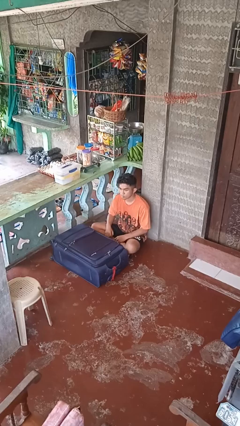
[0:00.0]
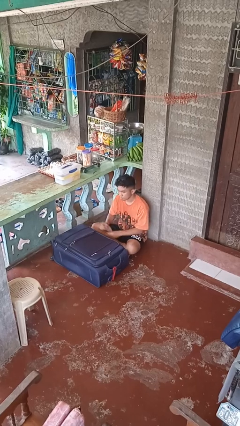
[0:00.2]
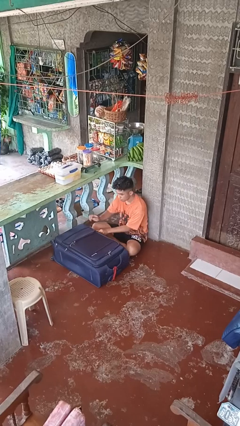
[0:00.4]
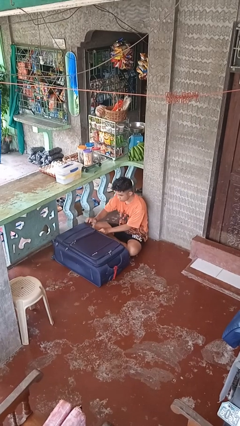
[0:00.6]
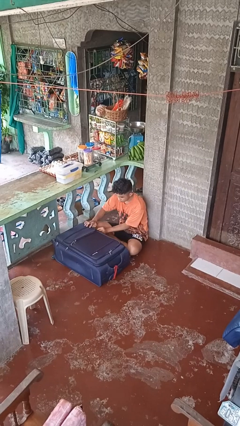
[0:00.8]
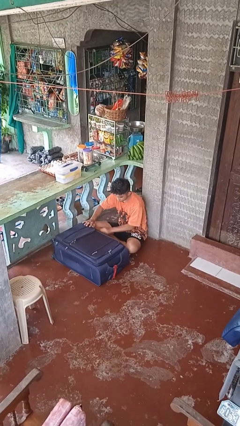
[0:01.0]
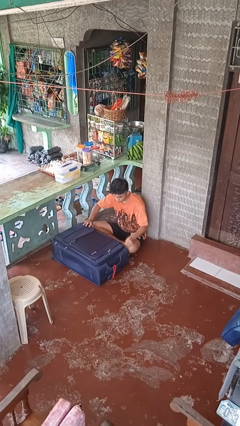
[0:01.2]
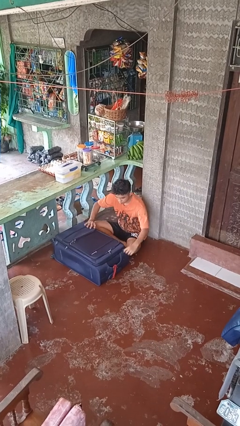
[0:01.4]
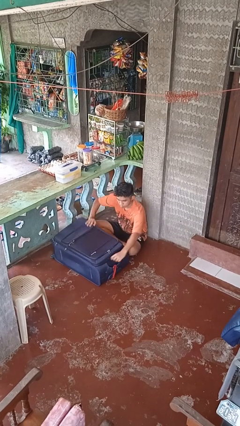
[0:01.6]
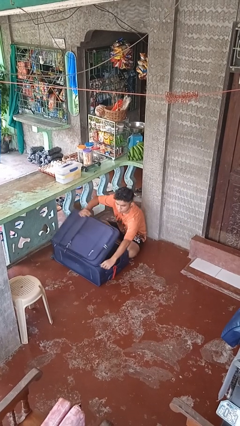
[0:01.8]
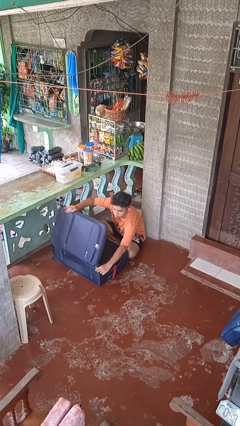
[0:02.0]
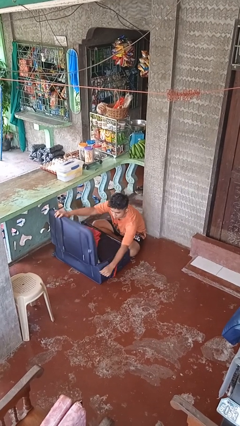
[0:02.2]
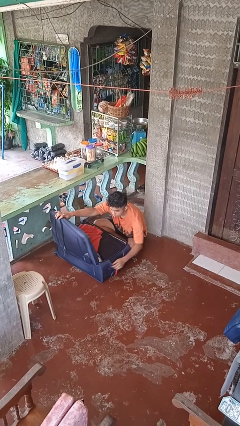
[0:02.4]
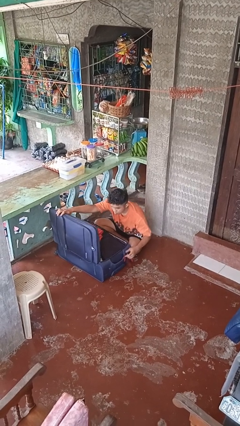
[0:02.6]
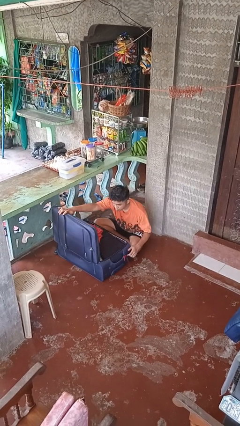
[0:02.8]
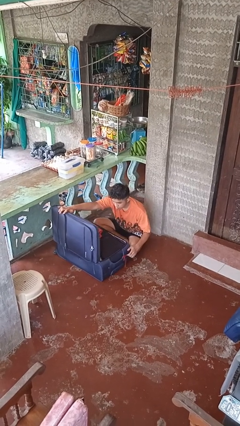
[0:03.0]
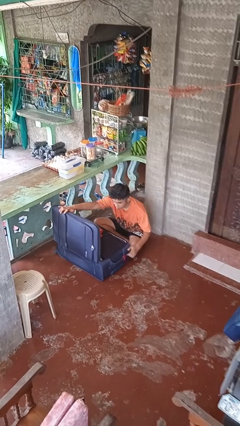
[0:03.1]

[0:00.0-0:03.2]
person opens suitcase

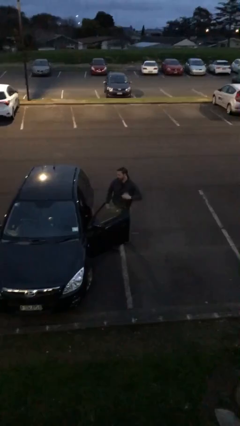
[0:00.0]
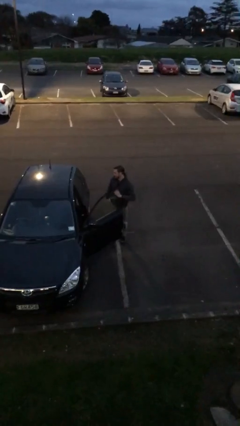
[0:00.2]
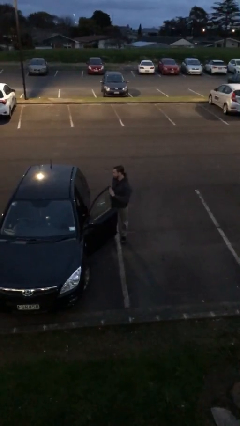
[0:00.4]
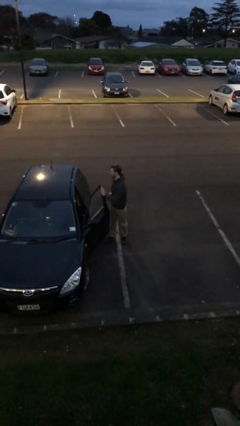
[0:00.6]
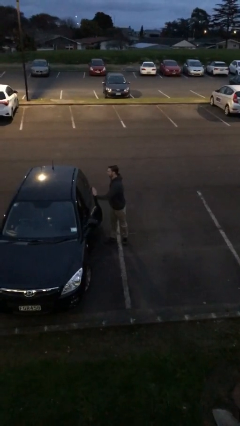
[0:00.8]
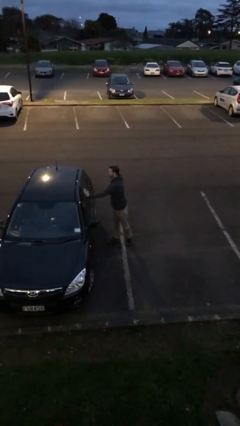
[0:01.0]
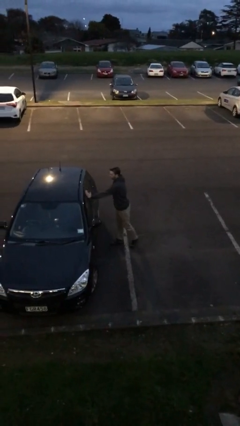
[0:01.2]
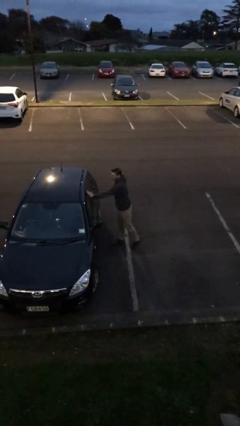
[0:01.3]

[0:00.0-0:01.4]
person closes car door

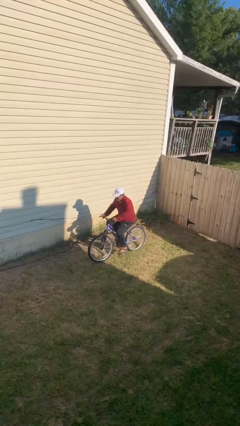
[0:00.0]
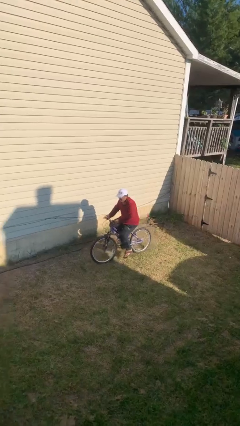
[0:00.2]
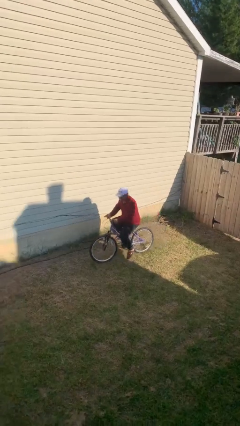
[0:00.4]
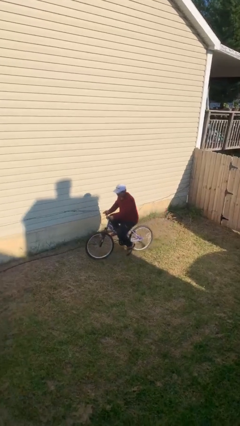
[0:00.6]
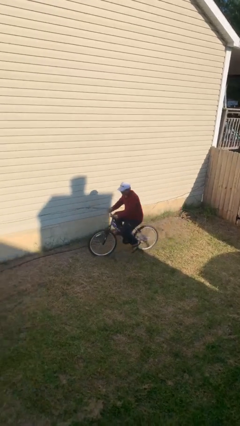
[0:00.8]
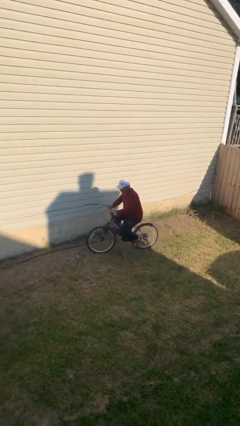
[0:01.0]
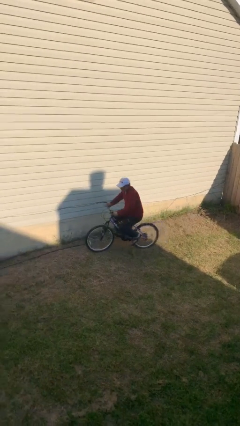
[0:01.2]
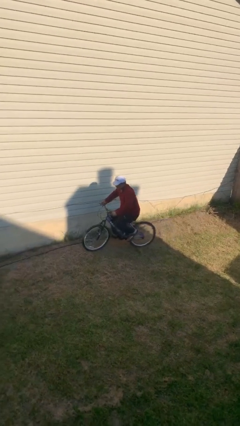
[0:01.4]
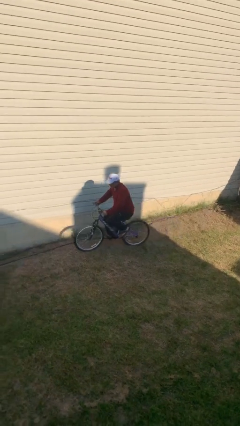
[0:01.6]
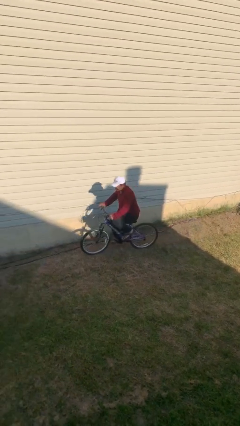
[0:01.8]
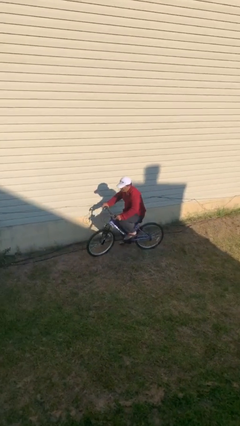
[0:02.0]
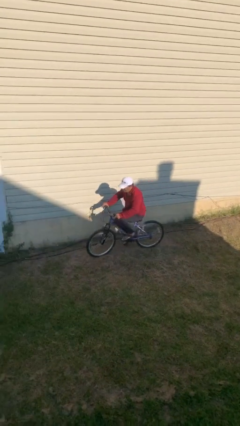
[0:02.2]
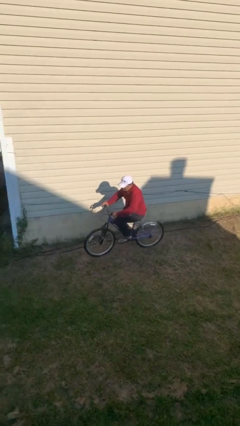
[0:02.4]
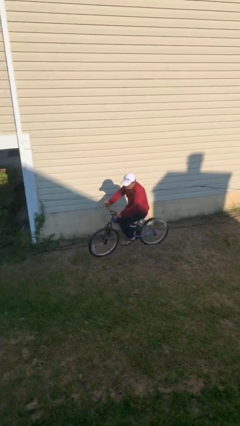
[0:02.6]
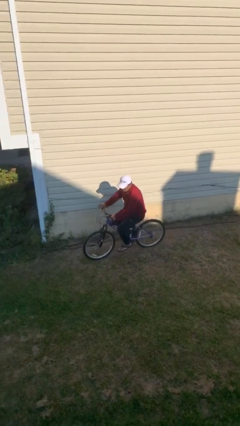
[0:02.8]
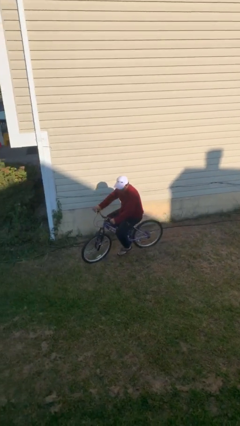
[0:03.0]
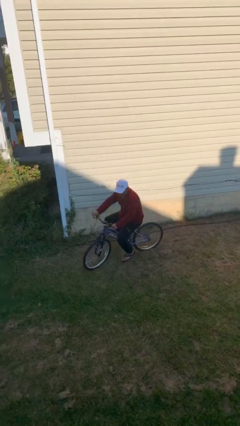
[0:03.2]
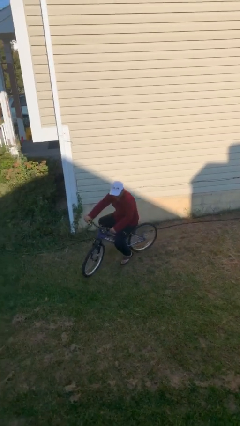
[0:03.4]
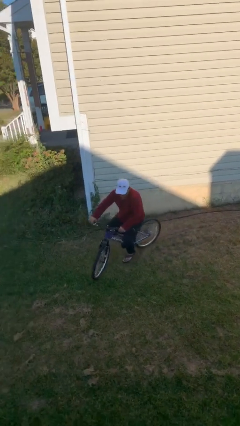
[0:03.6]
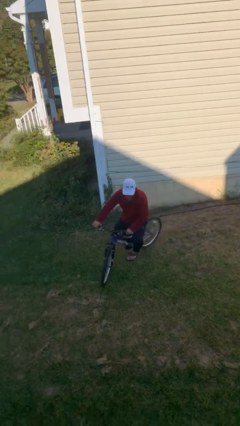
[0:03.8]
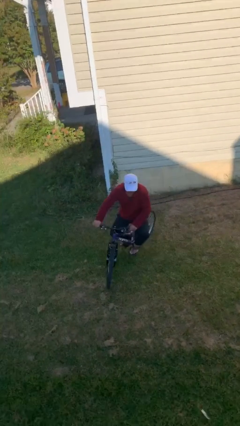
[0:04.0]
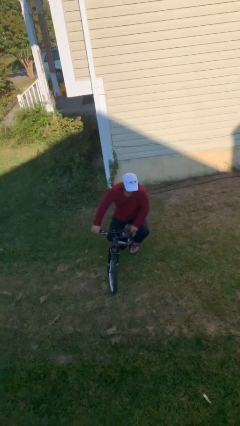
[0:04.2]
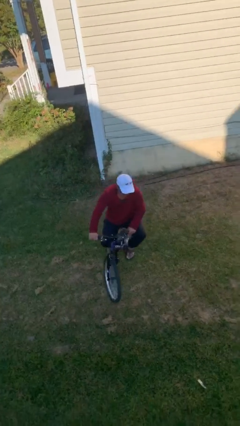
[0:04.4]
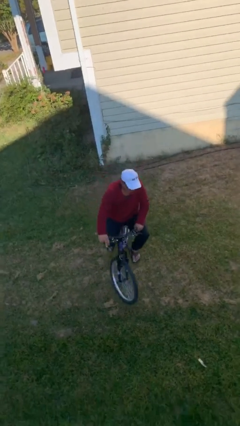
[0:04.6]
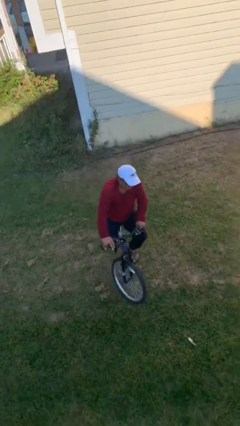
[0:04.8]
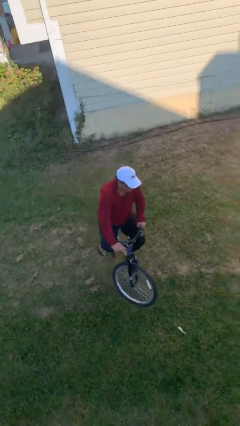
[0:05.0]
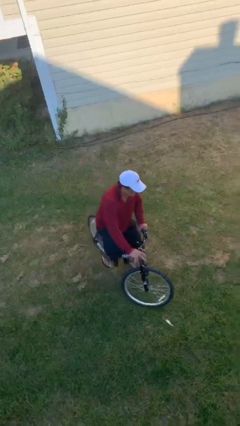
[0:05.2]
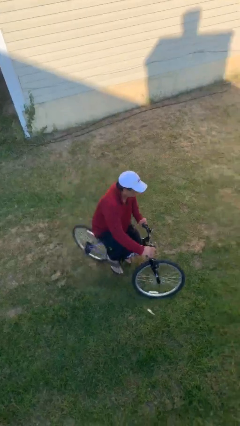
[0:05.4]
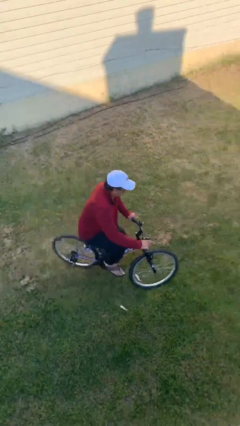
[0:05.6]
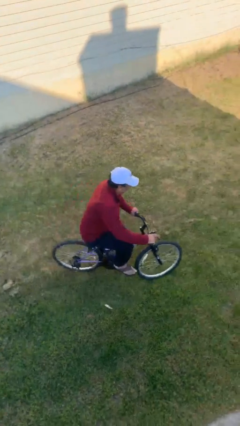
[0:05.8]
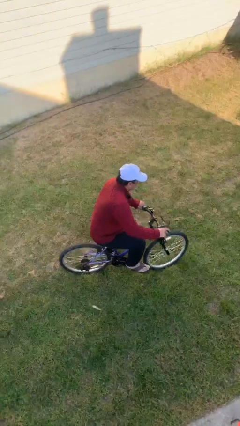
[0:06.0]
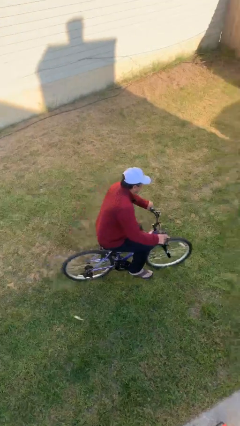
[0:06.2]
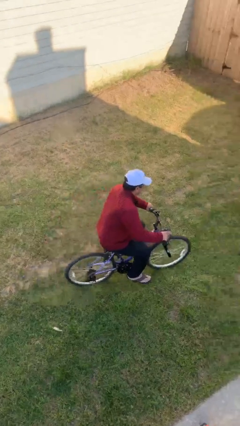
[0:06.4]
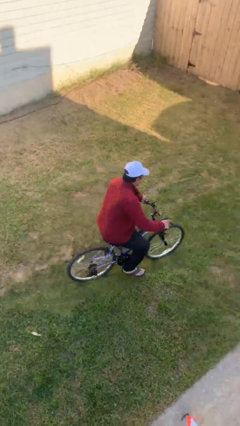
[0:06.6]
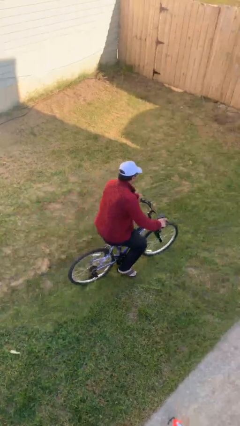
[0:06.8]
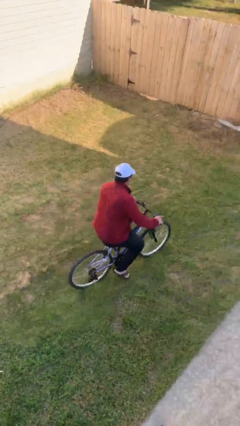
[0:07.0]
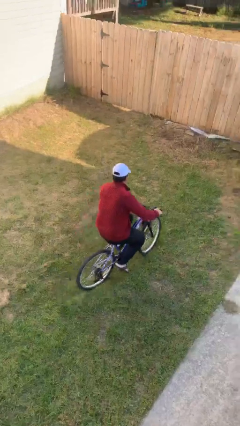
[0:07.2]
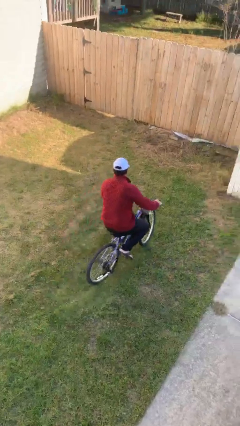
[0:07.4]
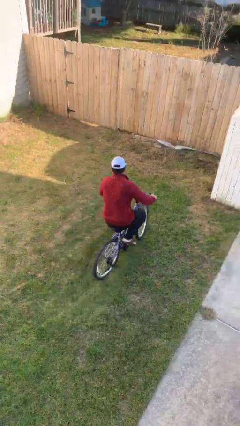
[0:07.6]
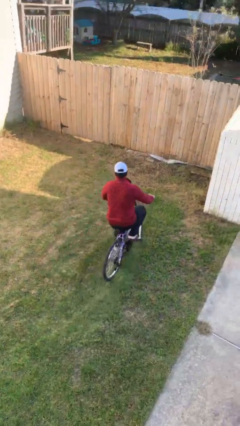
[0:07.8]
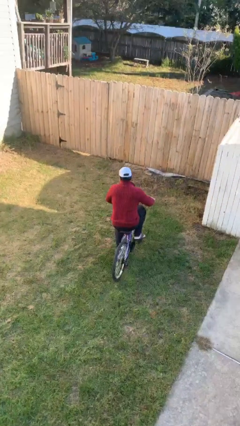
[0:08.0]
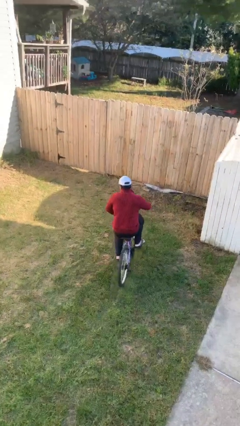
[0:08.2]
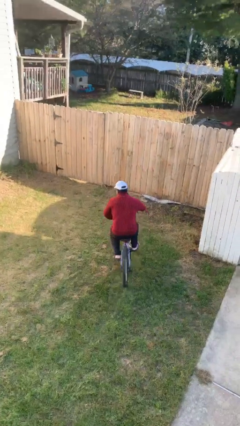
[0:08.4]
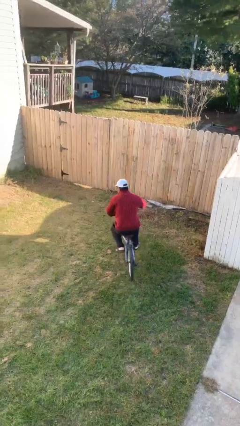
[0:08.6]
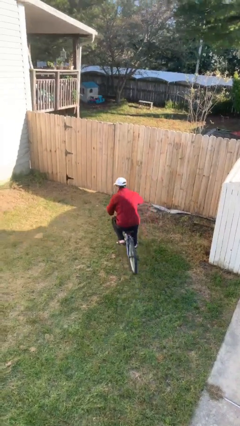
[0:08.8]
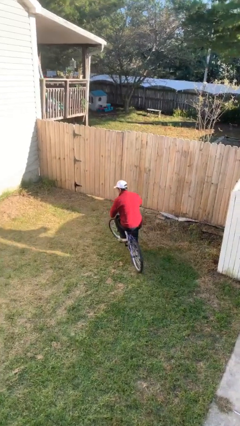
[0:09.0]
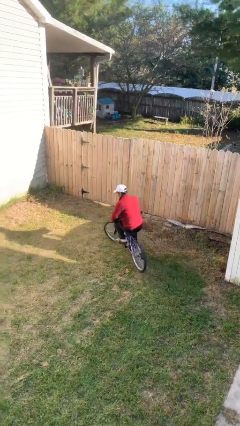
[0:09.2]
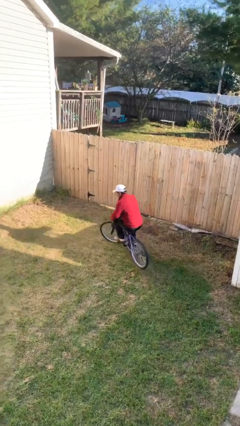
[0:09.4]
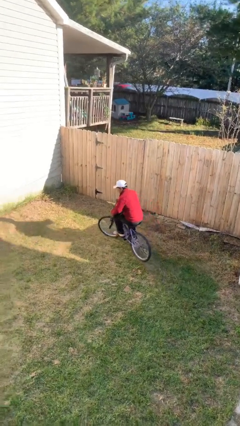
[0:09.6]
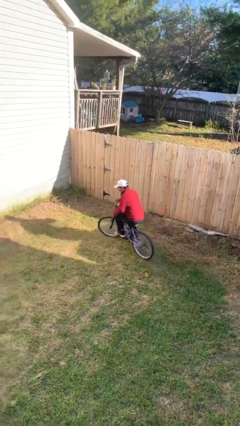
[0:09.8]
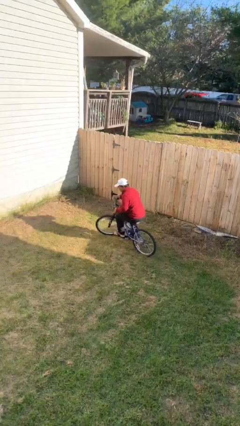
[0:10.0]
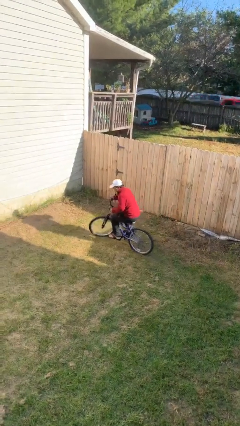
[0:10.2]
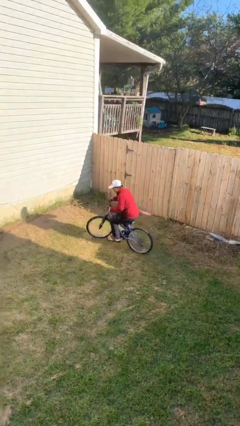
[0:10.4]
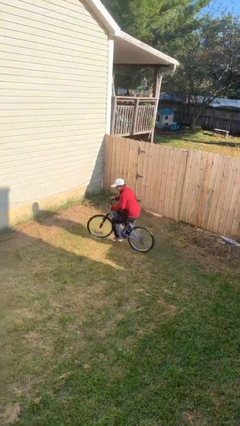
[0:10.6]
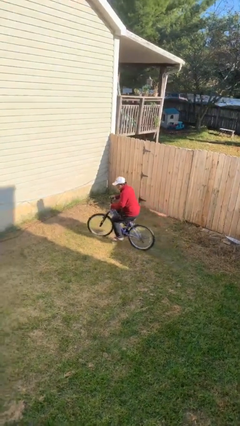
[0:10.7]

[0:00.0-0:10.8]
person rides bicycle

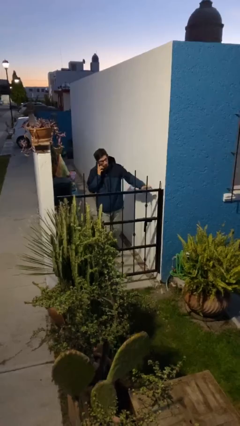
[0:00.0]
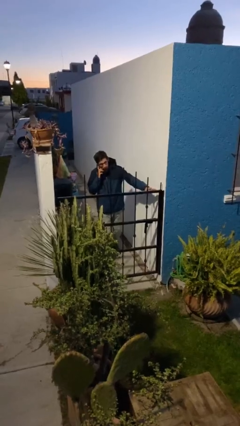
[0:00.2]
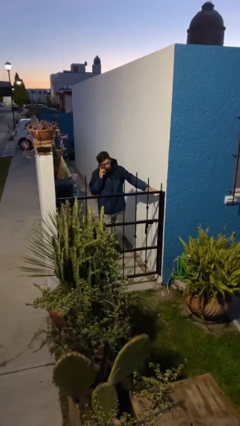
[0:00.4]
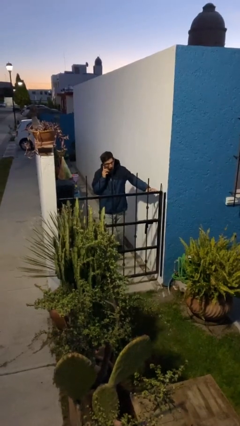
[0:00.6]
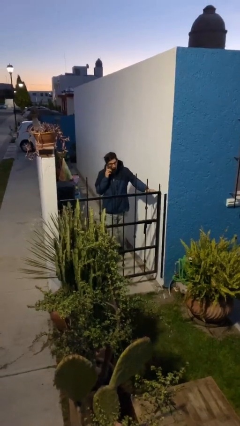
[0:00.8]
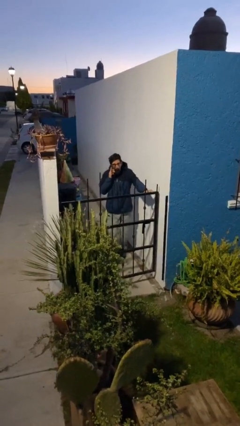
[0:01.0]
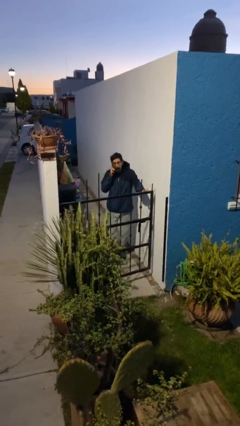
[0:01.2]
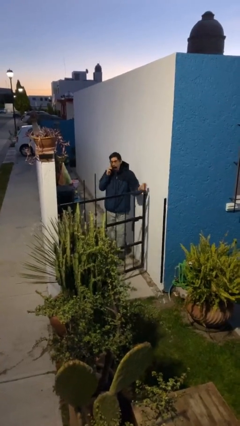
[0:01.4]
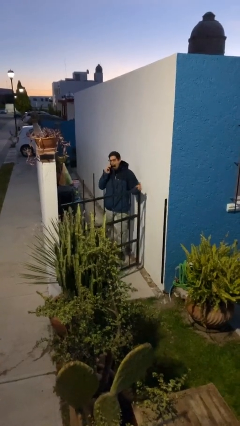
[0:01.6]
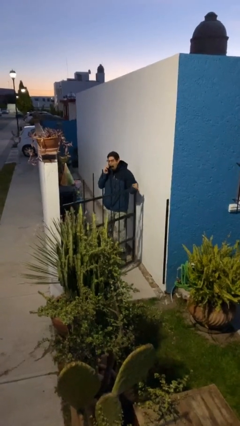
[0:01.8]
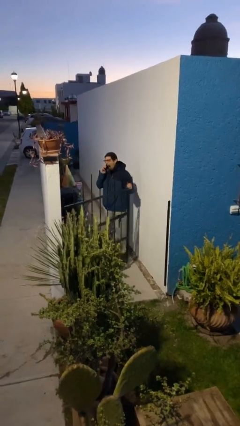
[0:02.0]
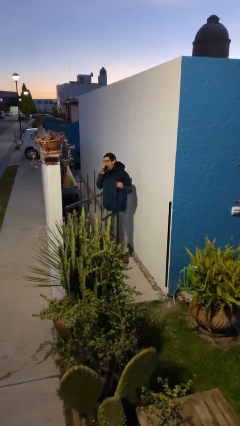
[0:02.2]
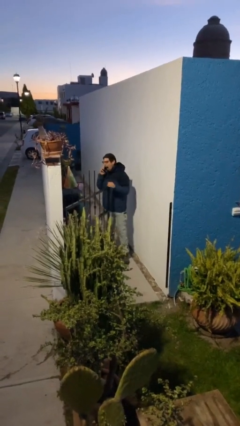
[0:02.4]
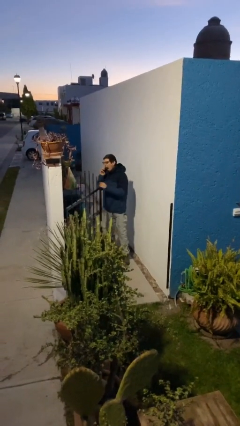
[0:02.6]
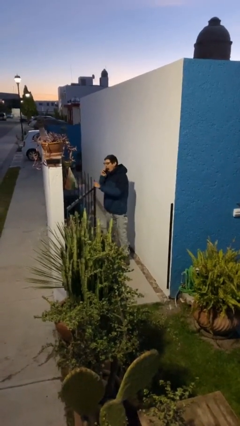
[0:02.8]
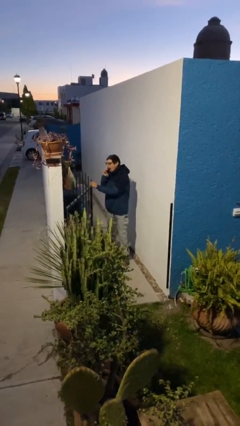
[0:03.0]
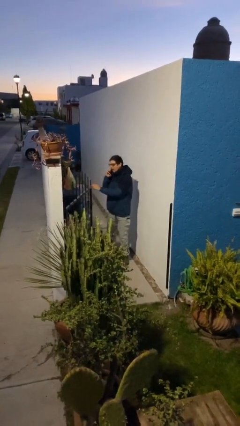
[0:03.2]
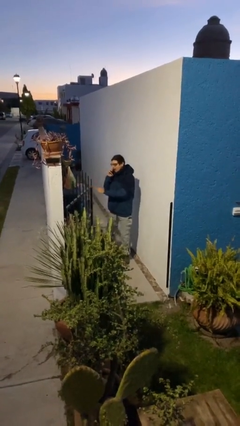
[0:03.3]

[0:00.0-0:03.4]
person opens facility door
